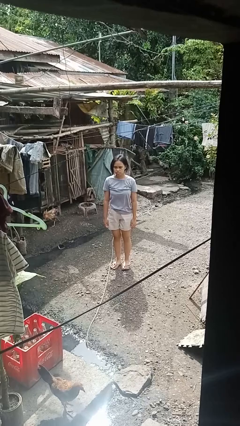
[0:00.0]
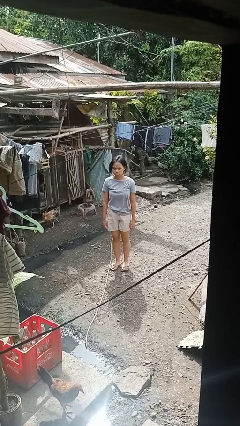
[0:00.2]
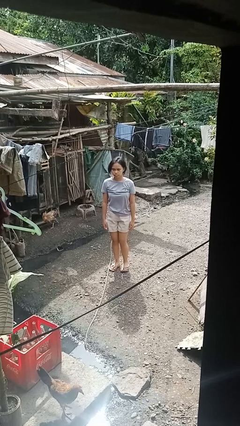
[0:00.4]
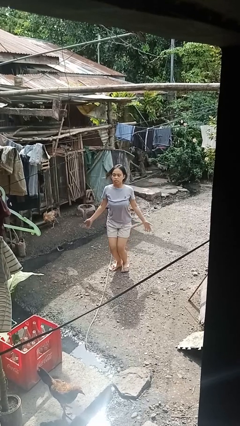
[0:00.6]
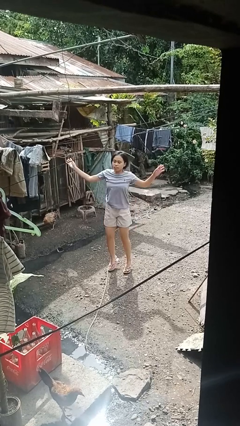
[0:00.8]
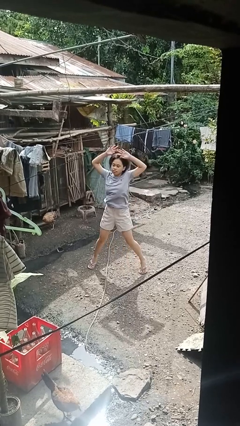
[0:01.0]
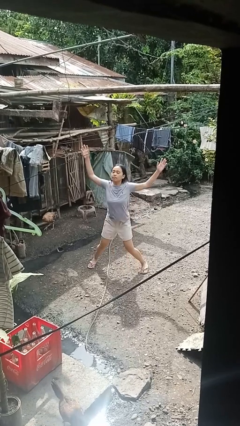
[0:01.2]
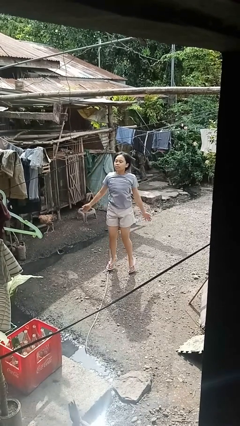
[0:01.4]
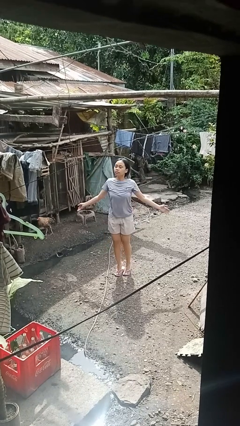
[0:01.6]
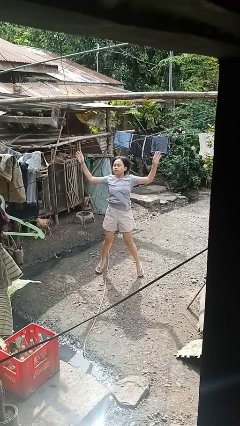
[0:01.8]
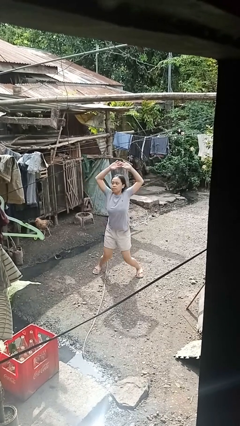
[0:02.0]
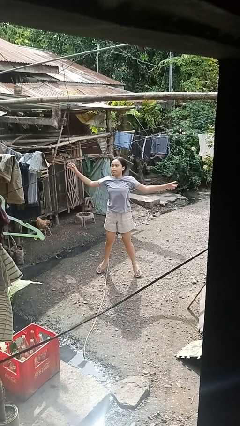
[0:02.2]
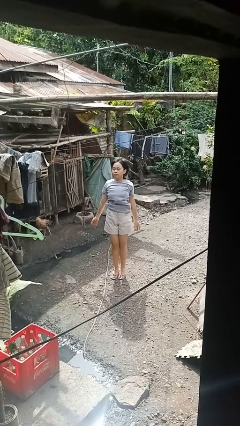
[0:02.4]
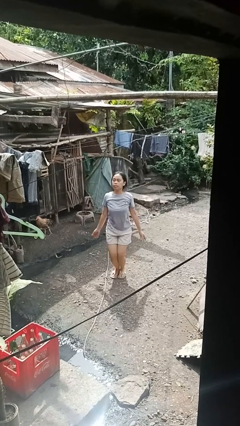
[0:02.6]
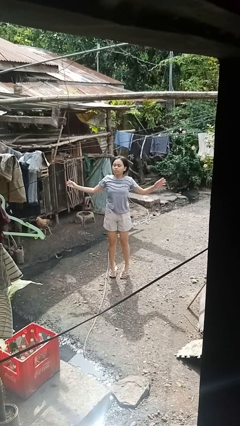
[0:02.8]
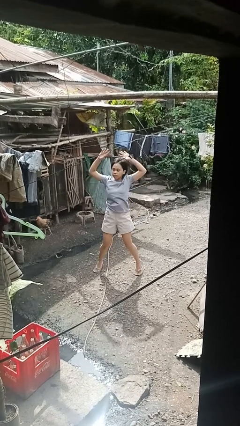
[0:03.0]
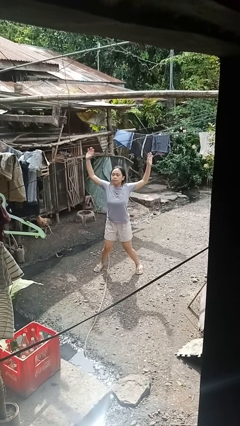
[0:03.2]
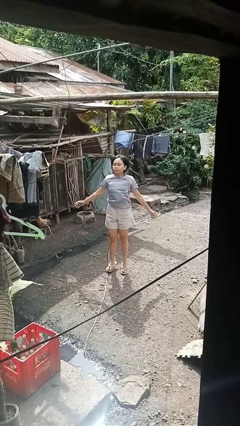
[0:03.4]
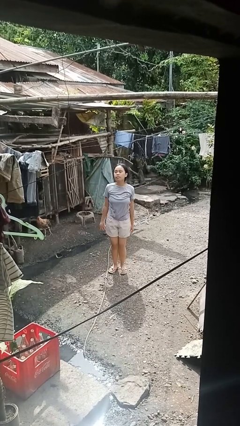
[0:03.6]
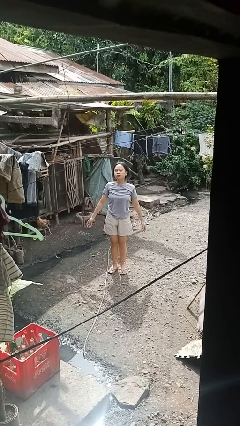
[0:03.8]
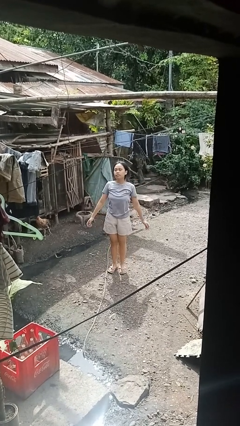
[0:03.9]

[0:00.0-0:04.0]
person exercises with jumping jacks

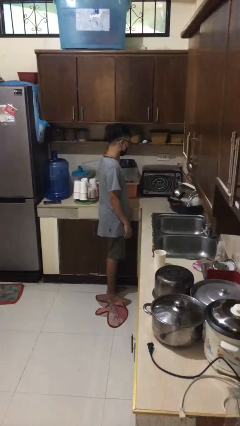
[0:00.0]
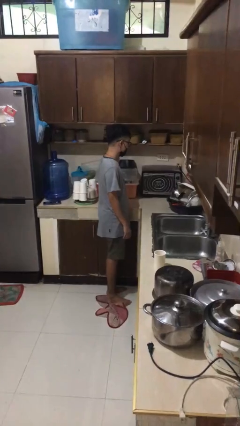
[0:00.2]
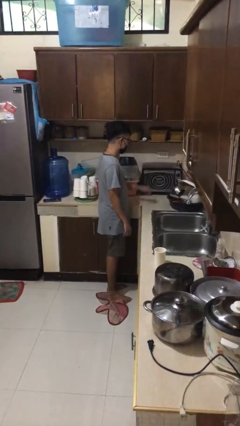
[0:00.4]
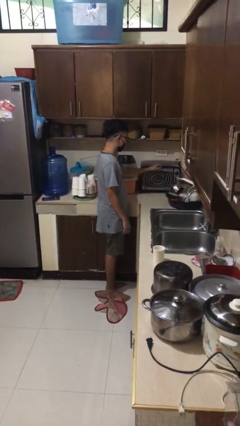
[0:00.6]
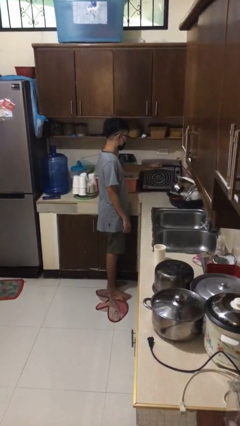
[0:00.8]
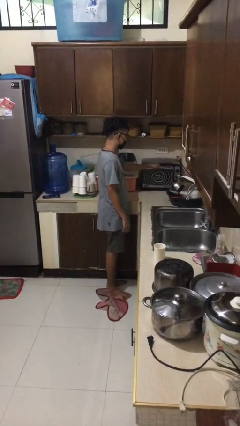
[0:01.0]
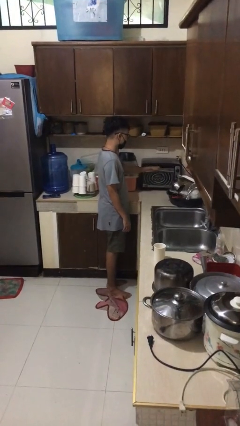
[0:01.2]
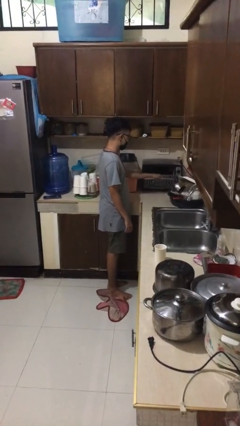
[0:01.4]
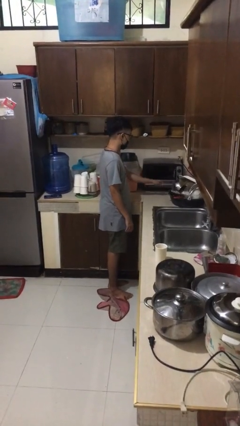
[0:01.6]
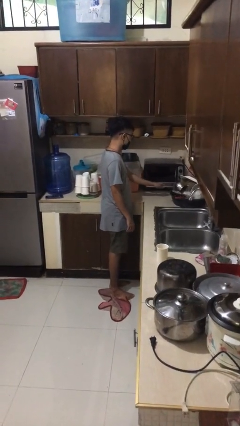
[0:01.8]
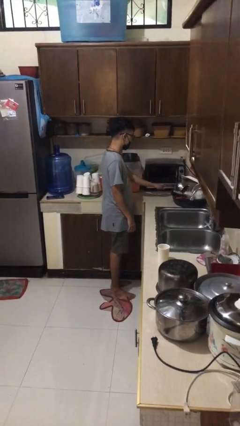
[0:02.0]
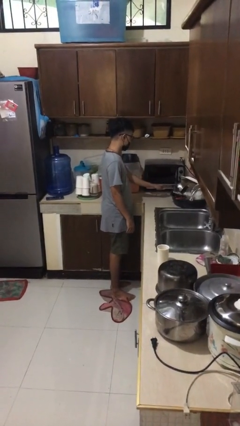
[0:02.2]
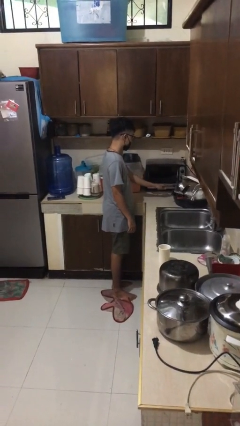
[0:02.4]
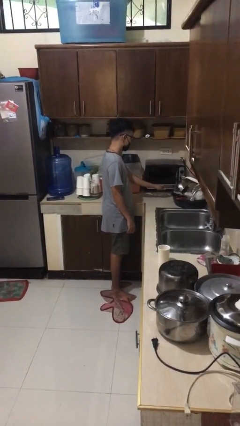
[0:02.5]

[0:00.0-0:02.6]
person opens microwave

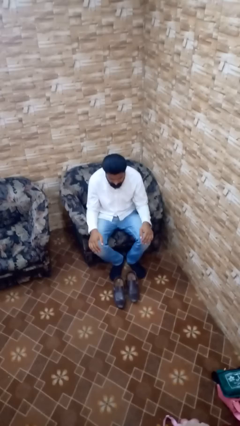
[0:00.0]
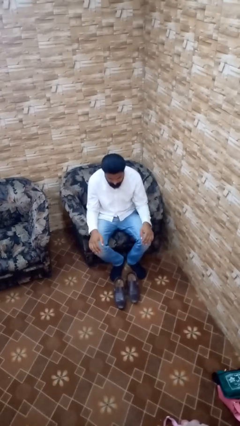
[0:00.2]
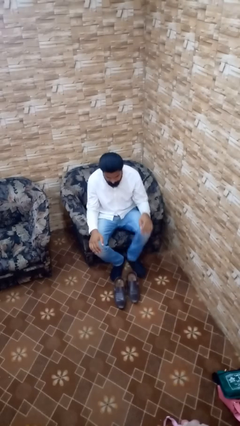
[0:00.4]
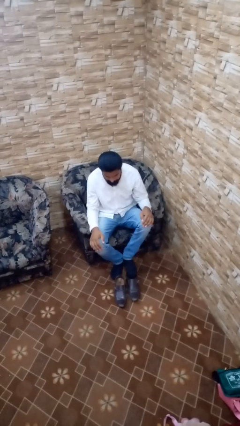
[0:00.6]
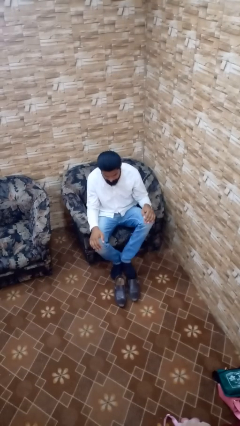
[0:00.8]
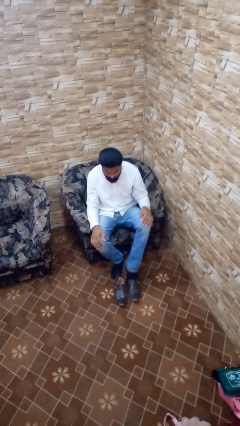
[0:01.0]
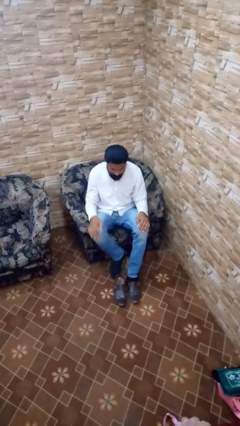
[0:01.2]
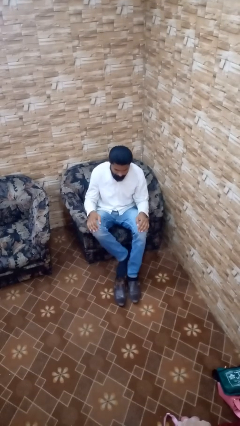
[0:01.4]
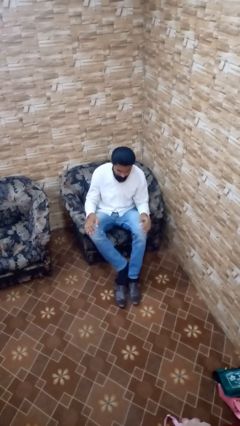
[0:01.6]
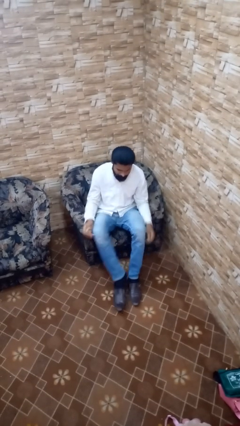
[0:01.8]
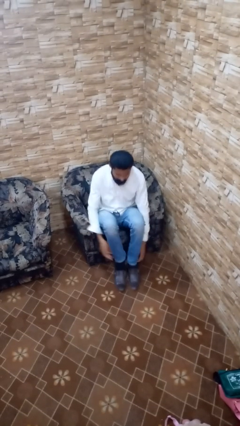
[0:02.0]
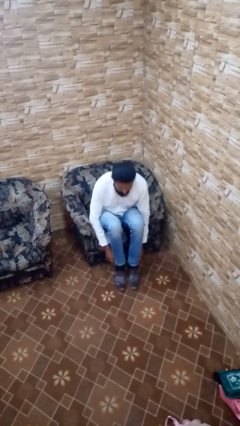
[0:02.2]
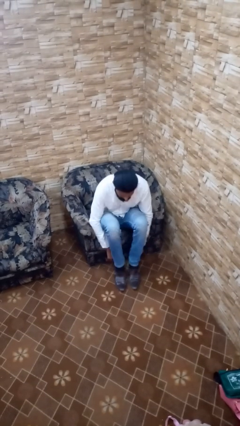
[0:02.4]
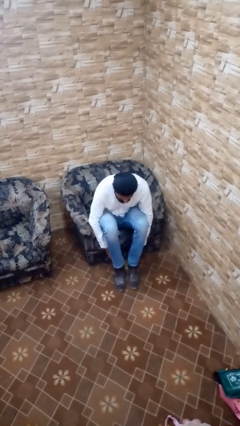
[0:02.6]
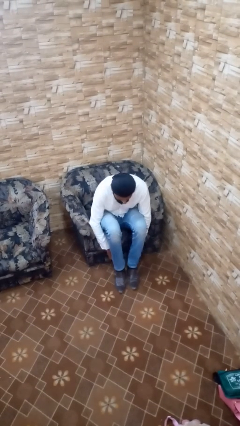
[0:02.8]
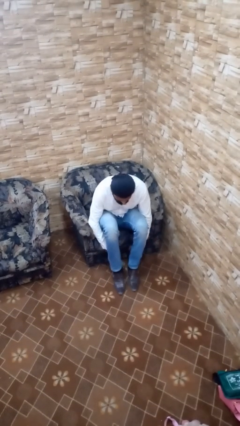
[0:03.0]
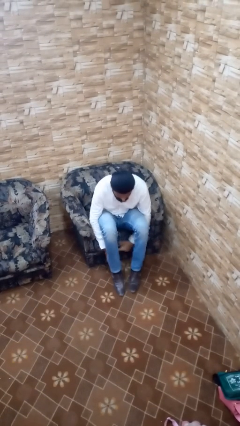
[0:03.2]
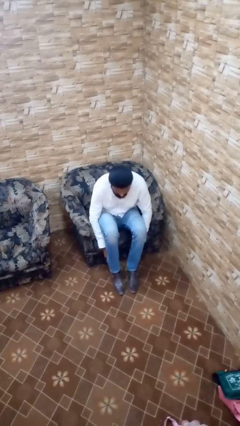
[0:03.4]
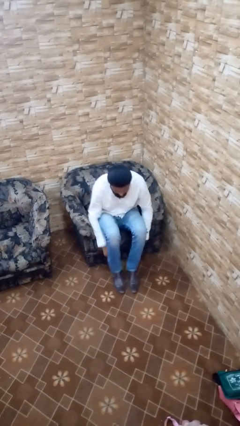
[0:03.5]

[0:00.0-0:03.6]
person puts on shoes

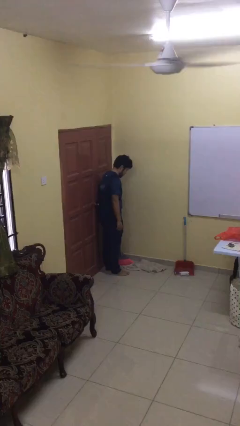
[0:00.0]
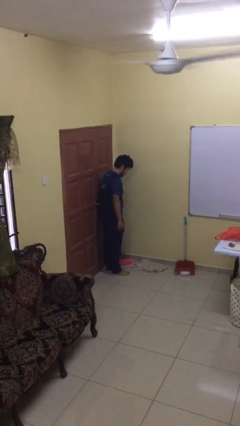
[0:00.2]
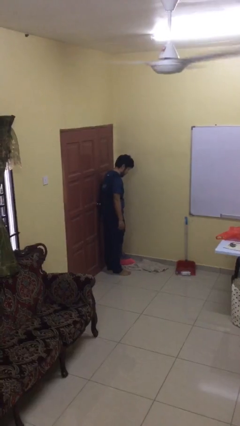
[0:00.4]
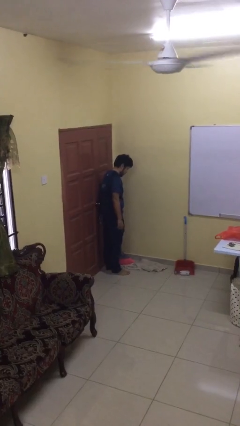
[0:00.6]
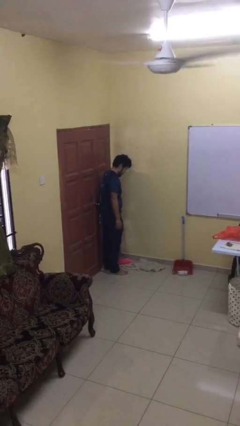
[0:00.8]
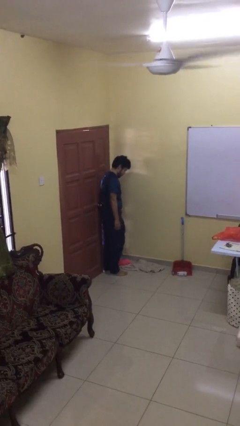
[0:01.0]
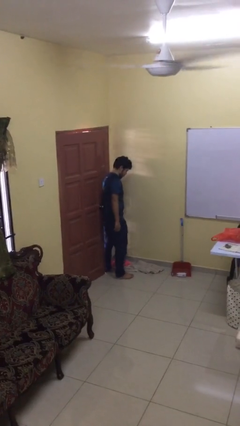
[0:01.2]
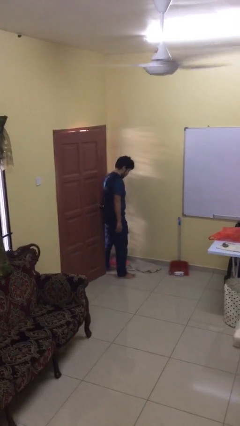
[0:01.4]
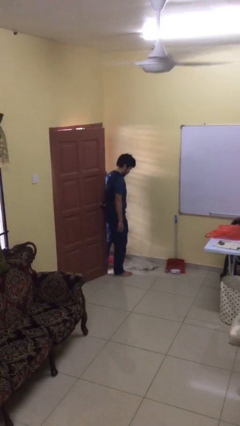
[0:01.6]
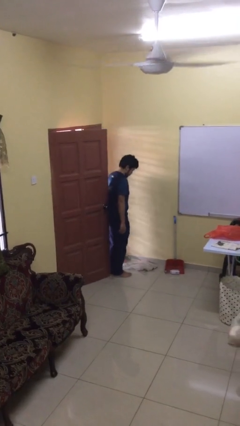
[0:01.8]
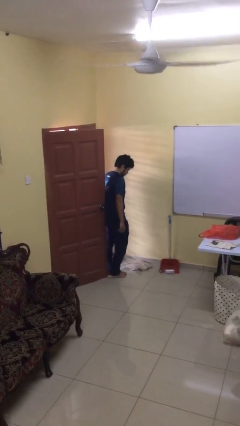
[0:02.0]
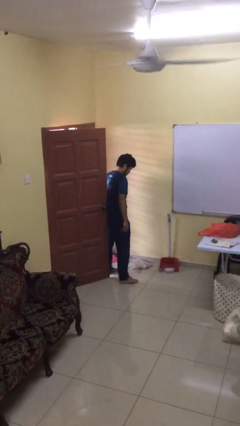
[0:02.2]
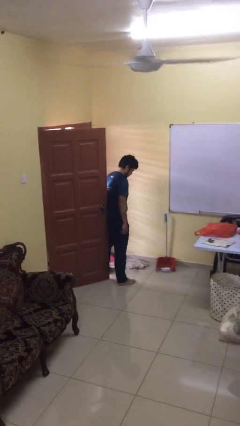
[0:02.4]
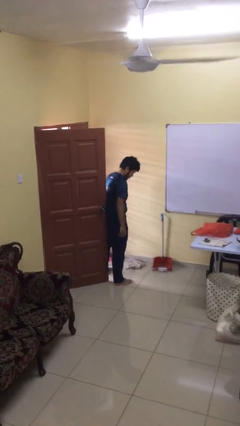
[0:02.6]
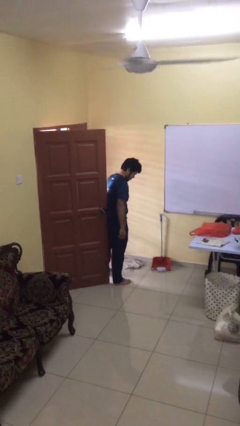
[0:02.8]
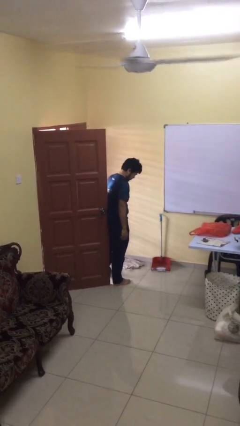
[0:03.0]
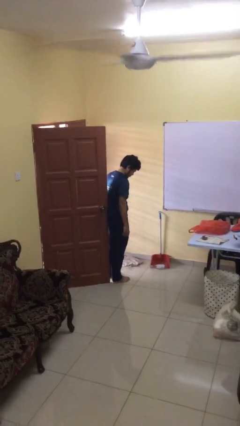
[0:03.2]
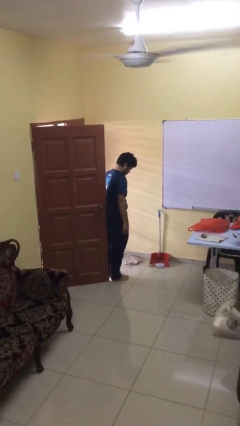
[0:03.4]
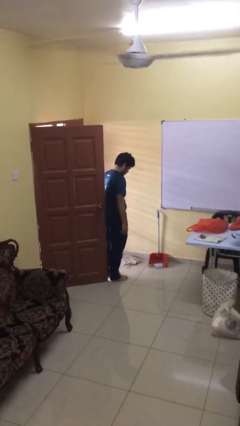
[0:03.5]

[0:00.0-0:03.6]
person opens facility door

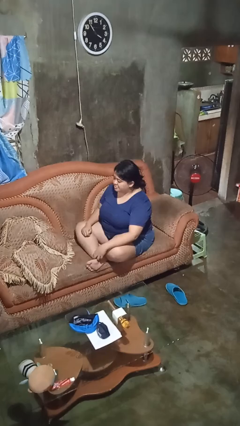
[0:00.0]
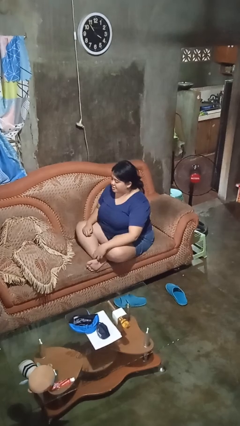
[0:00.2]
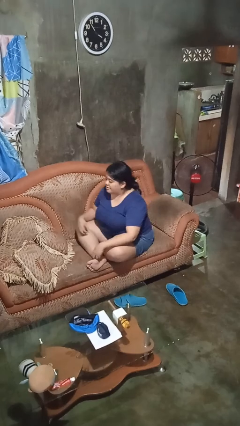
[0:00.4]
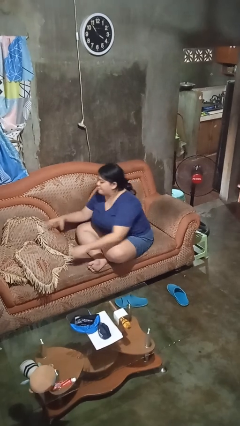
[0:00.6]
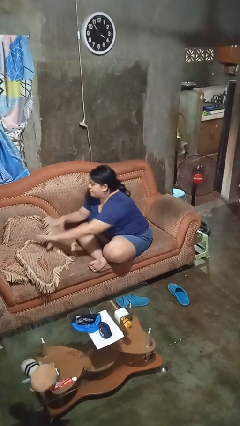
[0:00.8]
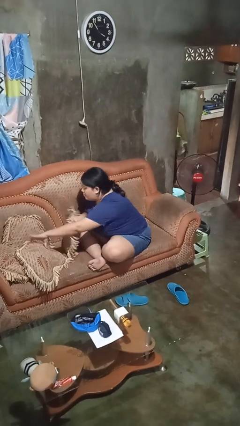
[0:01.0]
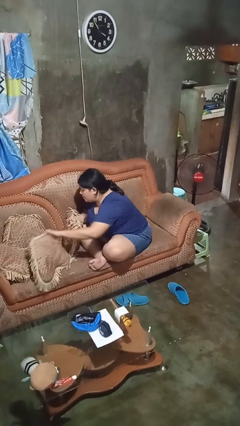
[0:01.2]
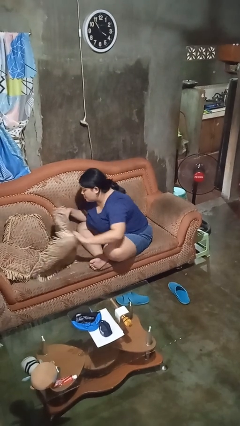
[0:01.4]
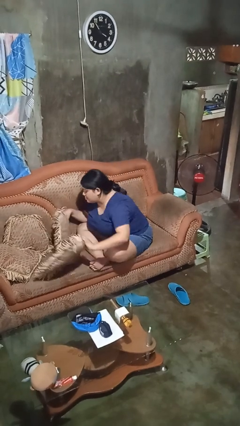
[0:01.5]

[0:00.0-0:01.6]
person searches in couch

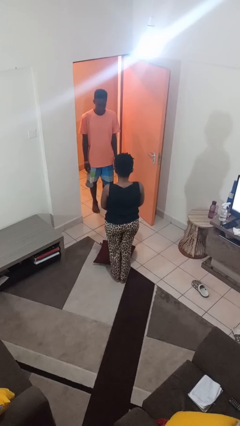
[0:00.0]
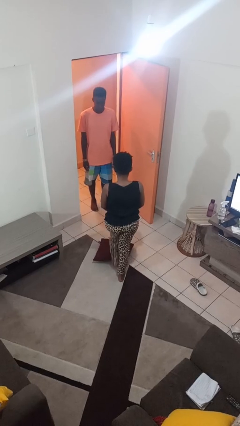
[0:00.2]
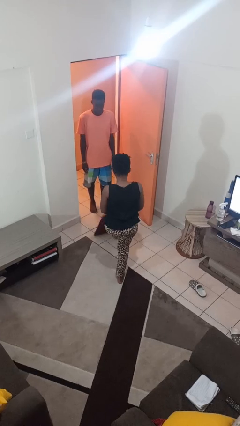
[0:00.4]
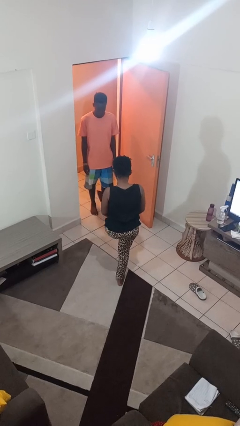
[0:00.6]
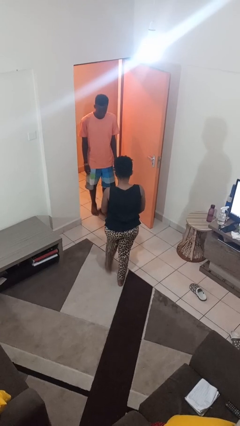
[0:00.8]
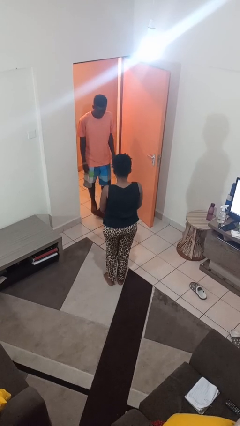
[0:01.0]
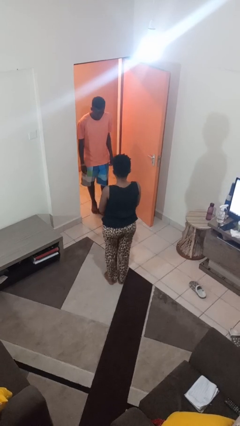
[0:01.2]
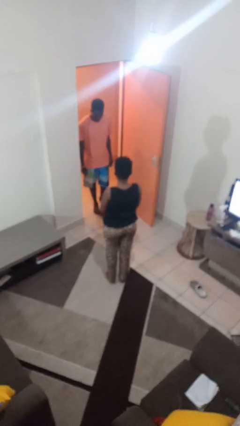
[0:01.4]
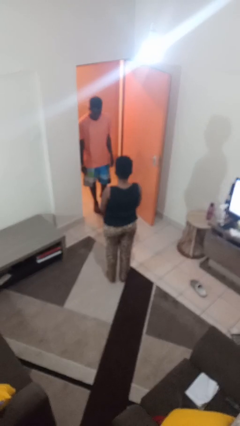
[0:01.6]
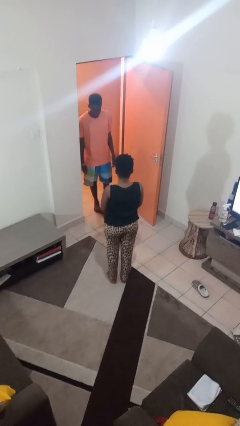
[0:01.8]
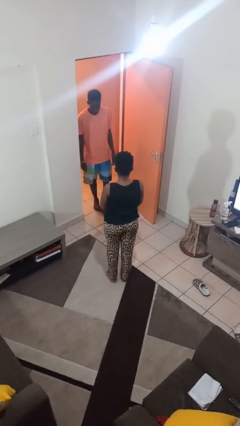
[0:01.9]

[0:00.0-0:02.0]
person kicks object to person
